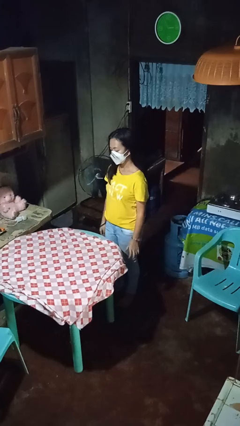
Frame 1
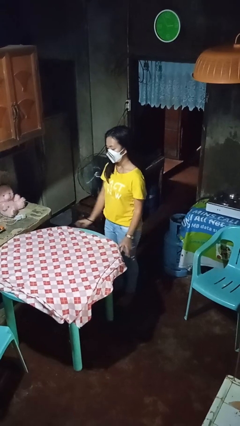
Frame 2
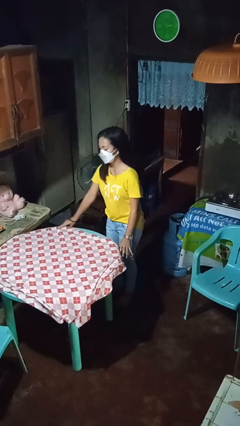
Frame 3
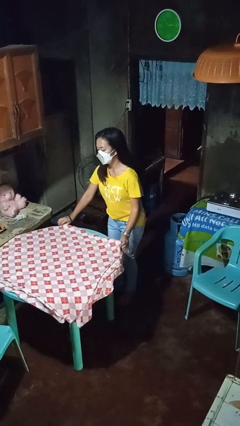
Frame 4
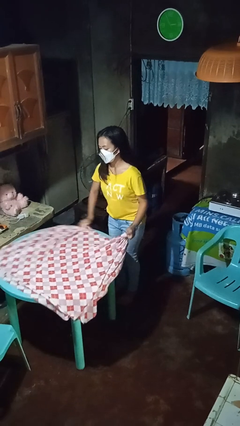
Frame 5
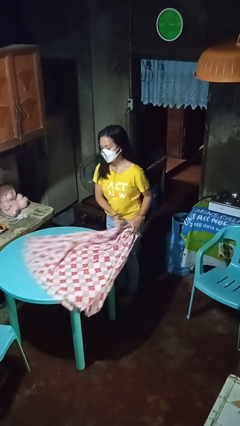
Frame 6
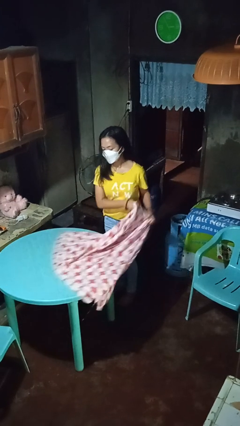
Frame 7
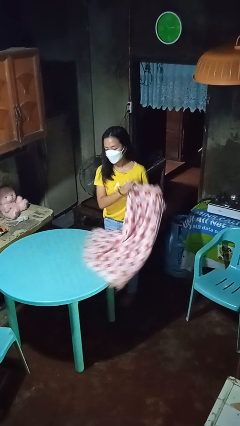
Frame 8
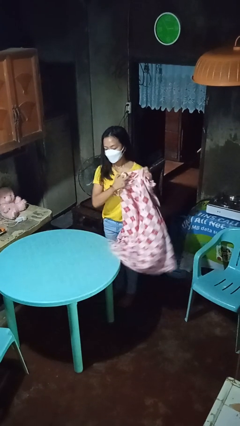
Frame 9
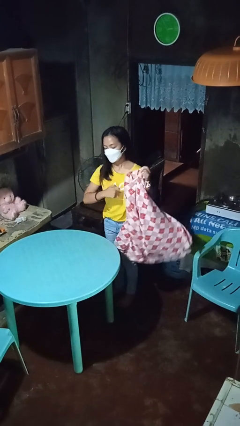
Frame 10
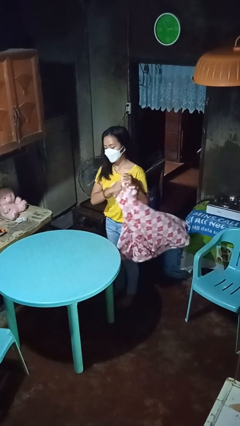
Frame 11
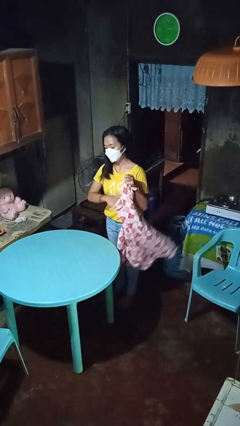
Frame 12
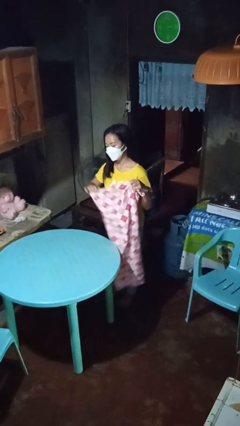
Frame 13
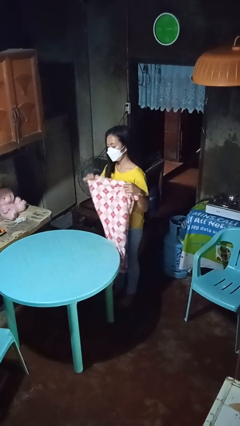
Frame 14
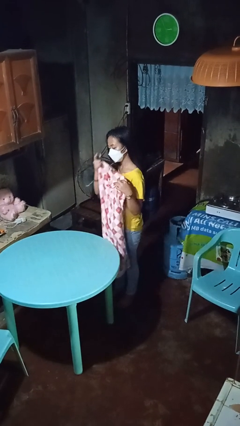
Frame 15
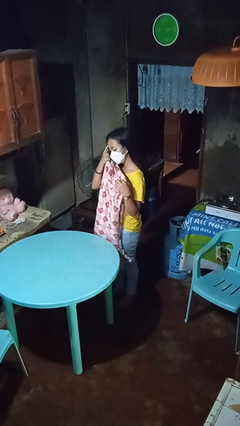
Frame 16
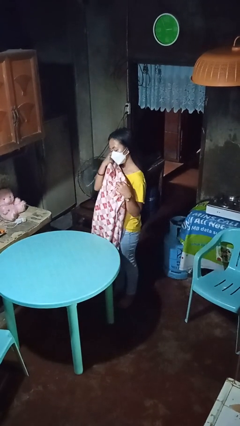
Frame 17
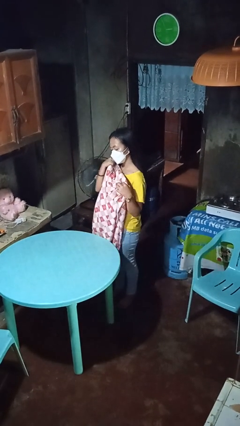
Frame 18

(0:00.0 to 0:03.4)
person folds tablecloth

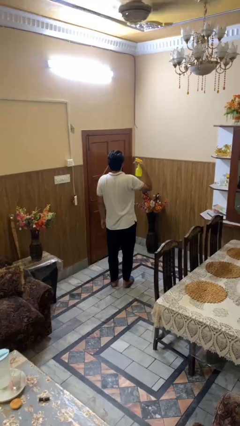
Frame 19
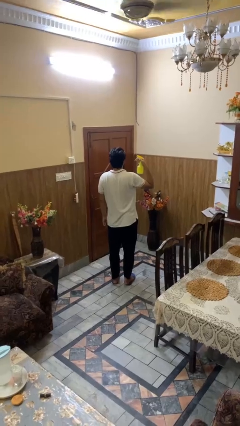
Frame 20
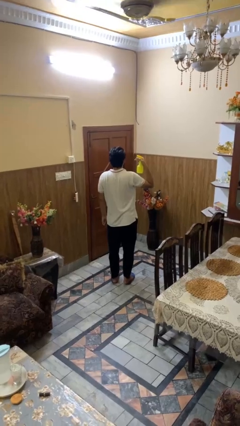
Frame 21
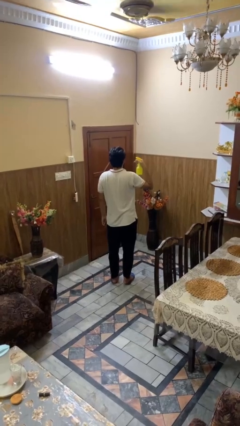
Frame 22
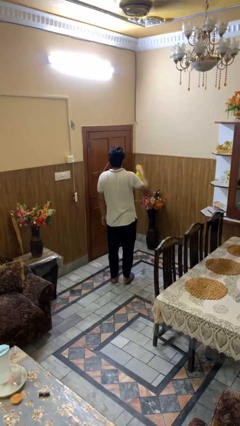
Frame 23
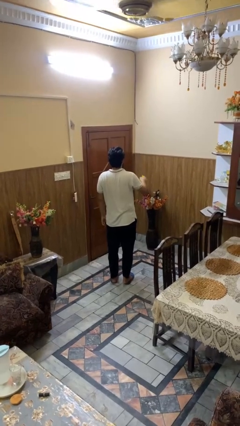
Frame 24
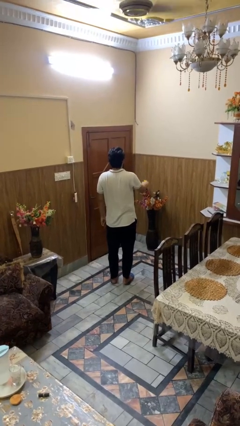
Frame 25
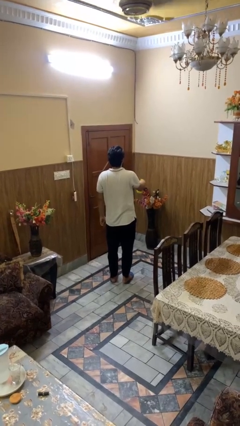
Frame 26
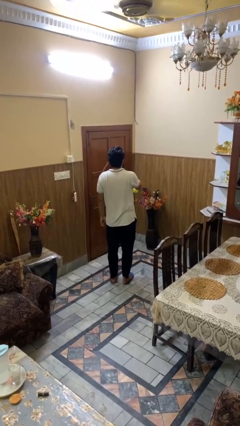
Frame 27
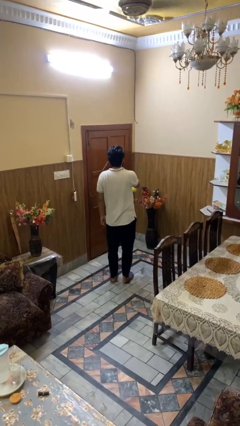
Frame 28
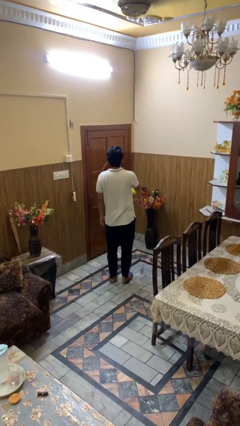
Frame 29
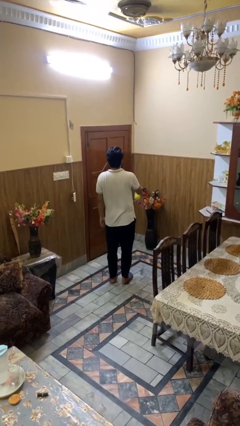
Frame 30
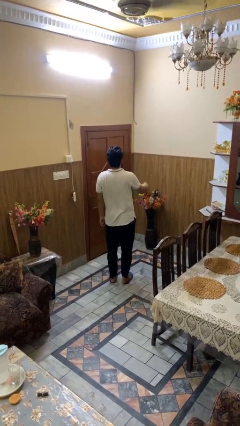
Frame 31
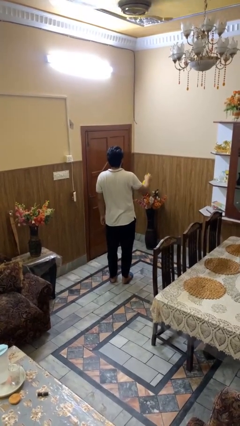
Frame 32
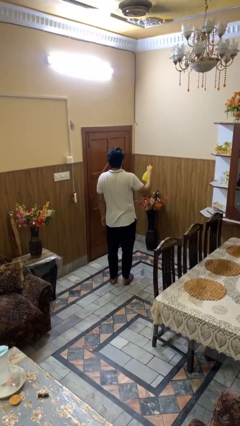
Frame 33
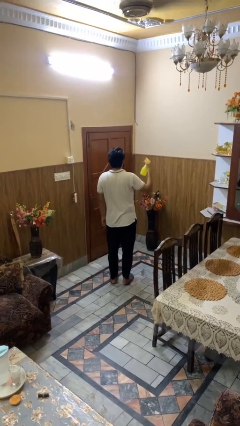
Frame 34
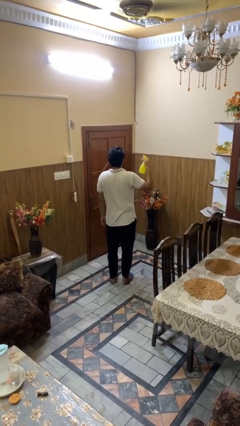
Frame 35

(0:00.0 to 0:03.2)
person sprays from bottle

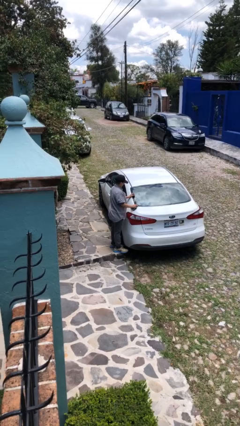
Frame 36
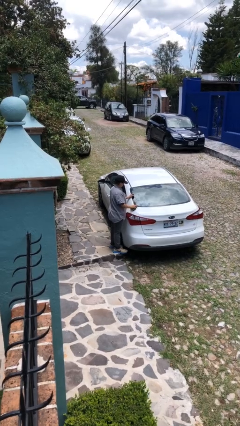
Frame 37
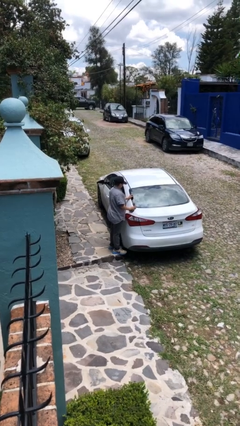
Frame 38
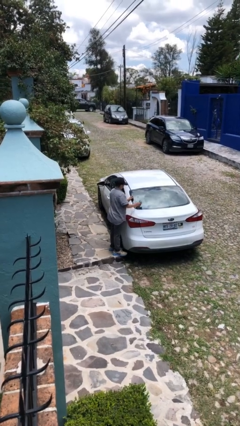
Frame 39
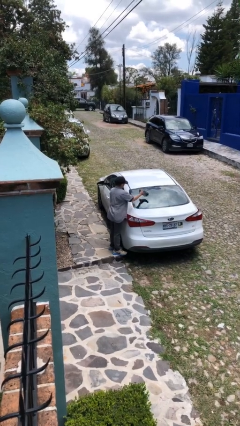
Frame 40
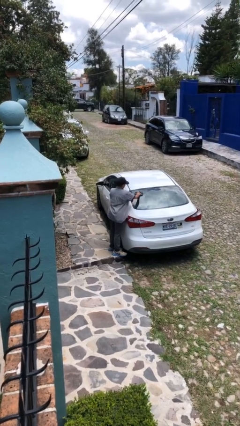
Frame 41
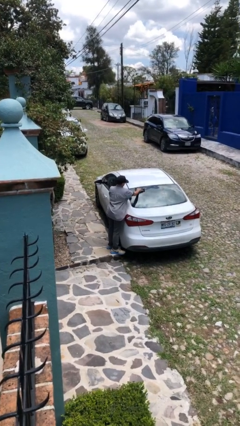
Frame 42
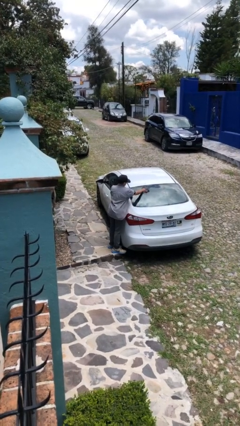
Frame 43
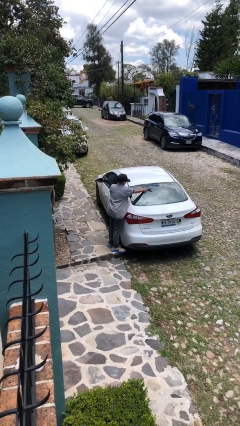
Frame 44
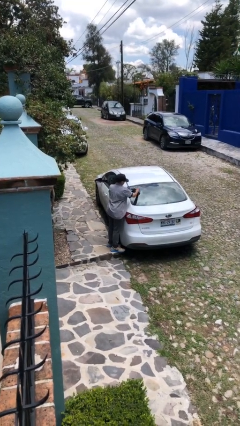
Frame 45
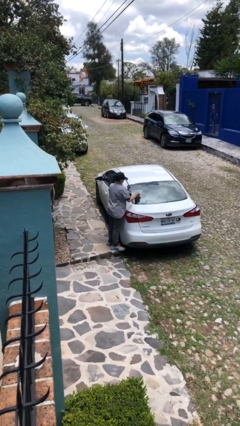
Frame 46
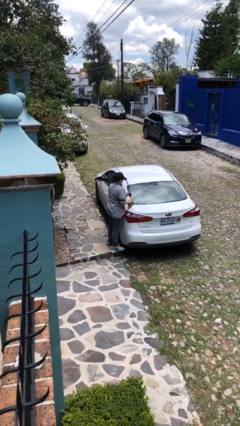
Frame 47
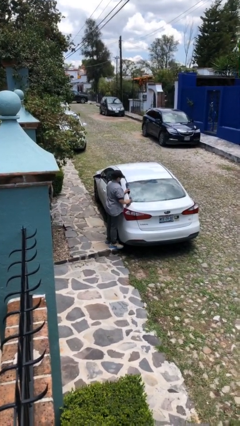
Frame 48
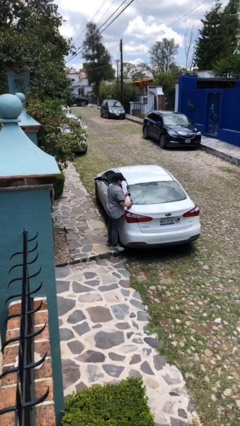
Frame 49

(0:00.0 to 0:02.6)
person polishes car with rag

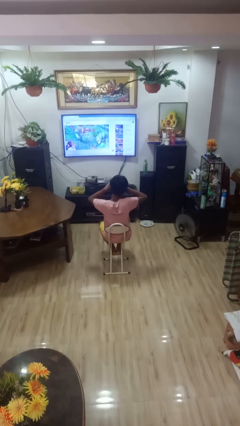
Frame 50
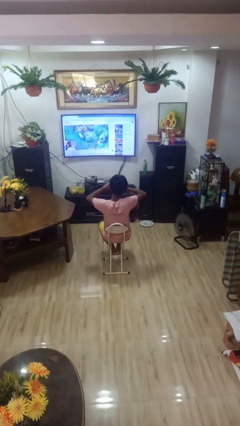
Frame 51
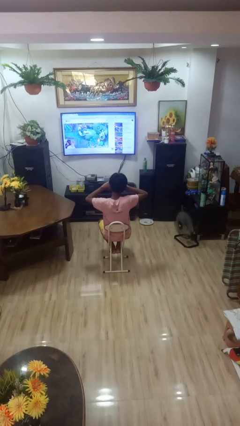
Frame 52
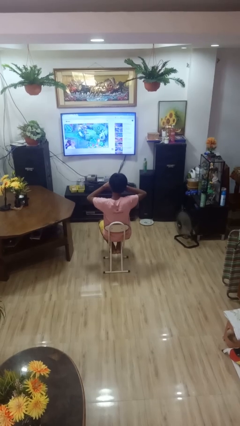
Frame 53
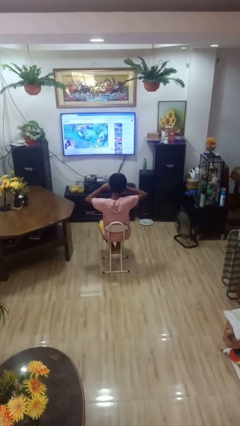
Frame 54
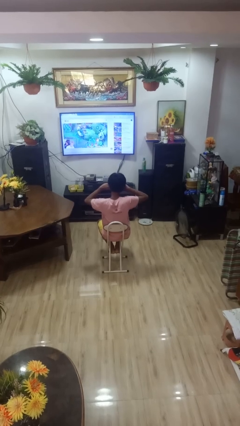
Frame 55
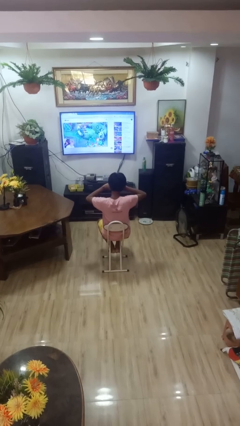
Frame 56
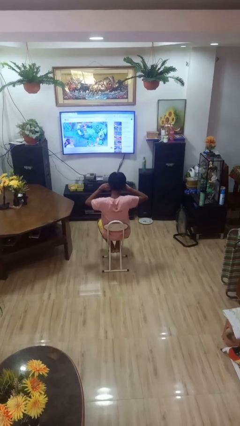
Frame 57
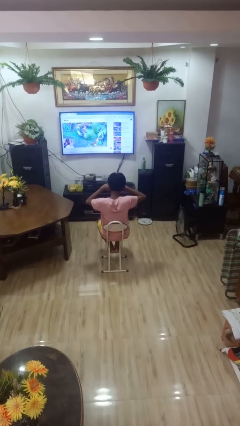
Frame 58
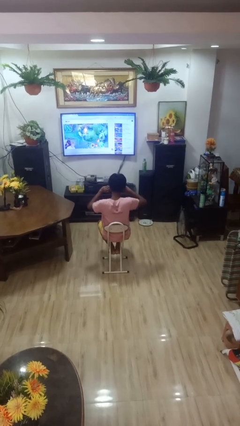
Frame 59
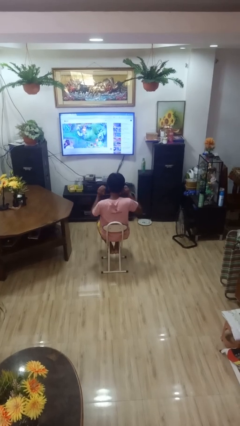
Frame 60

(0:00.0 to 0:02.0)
person rubs eyes

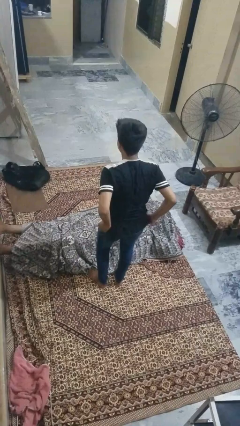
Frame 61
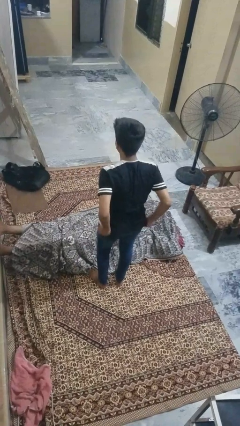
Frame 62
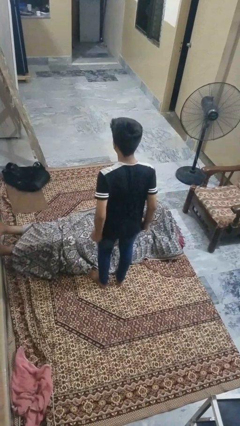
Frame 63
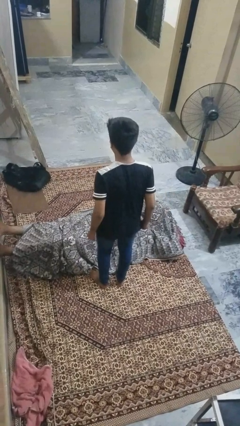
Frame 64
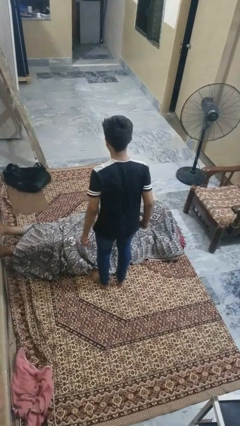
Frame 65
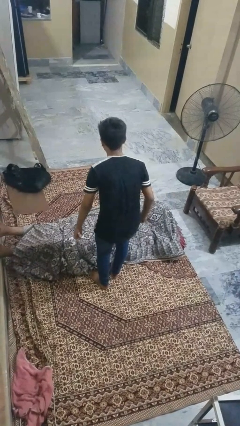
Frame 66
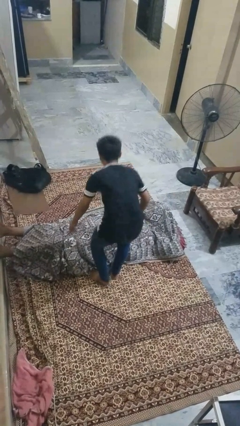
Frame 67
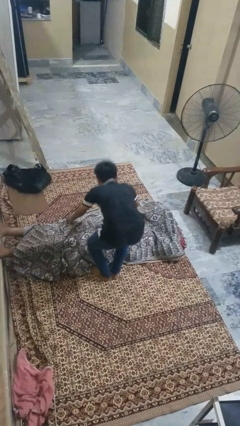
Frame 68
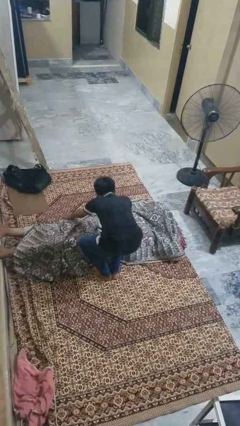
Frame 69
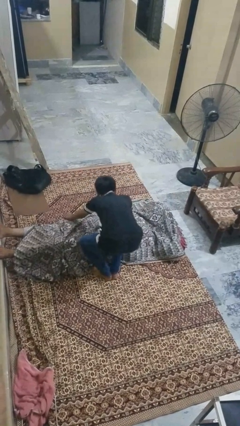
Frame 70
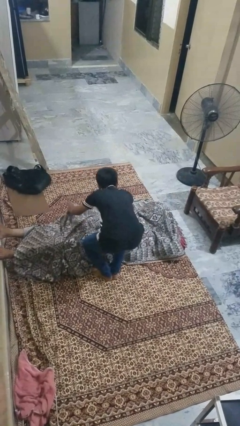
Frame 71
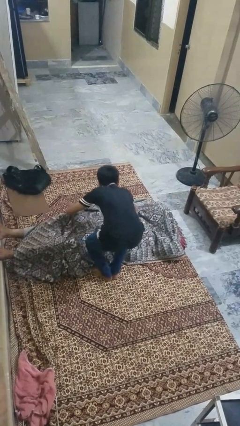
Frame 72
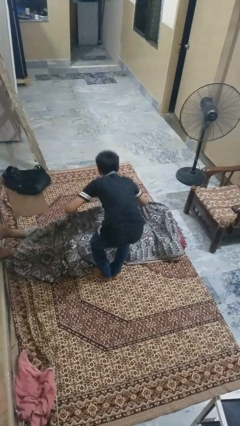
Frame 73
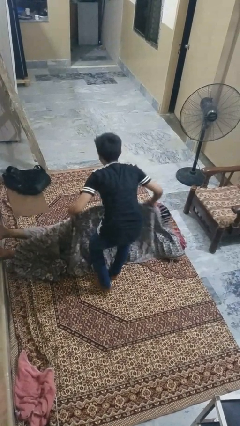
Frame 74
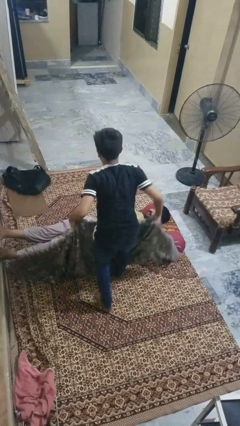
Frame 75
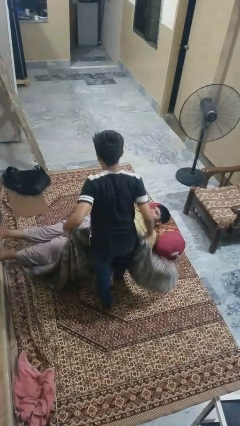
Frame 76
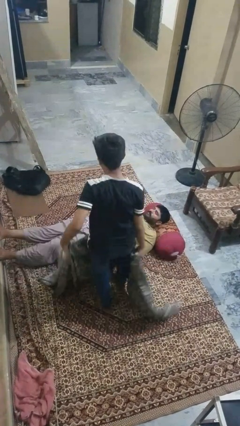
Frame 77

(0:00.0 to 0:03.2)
person uncovers friend with blanket

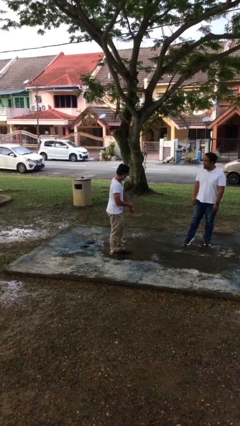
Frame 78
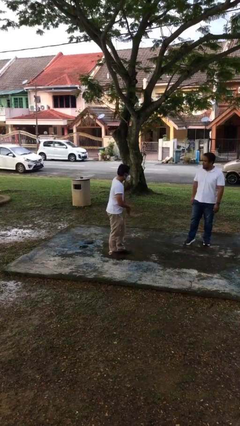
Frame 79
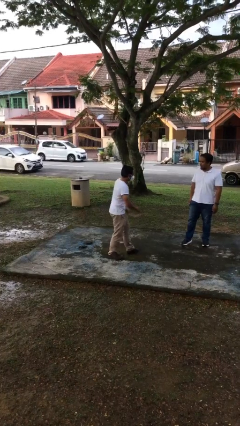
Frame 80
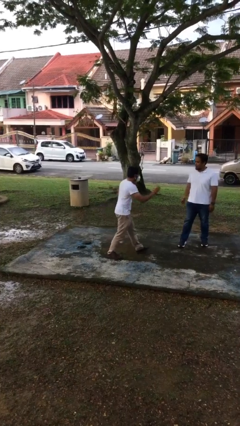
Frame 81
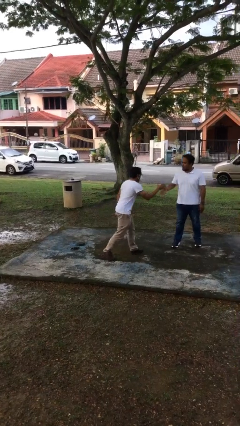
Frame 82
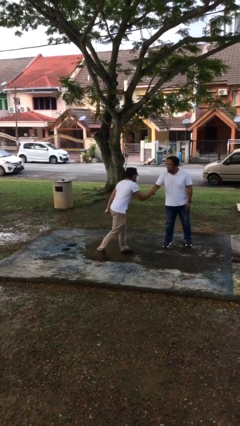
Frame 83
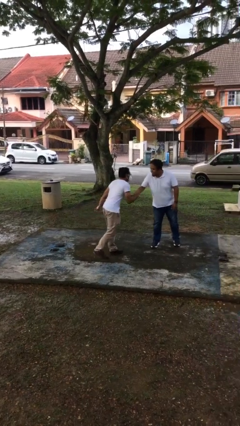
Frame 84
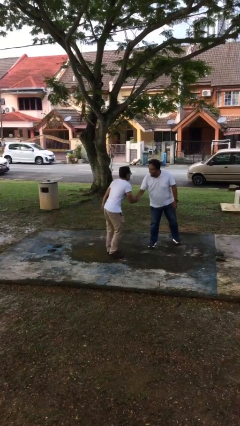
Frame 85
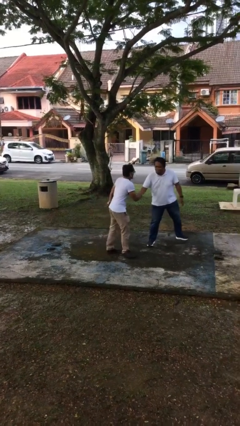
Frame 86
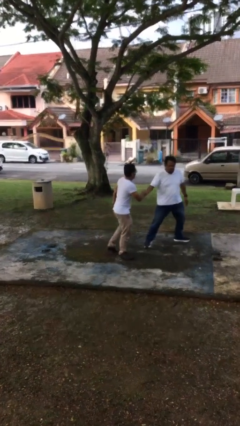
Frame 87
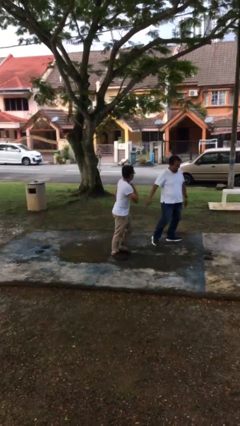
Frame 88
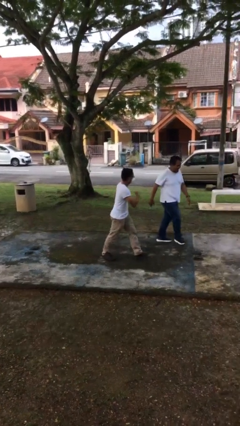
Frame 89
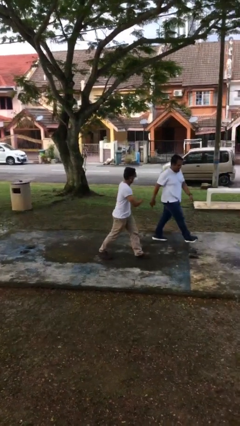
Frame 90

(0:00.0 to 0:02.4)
person shakes hand

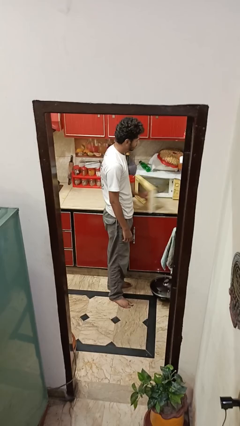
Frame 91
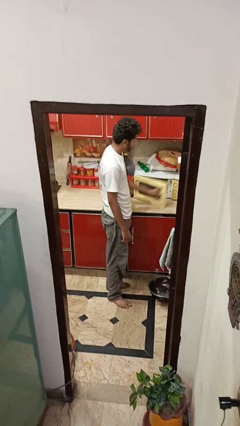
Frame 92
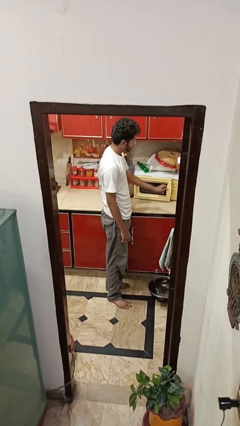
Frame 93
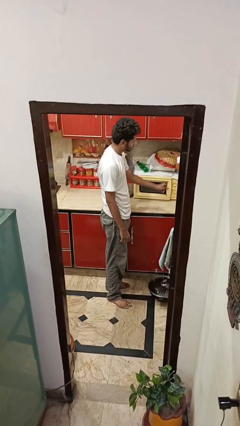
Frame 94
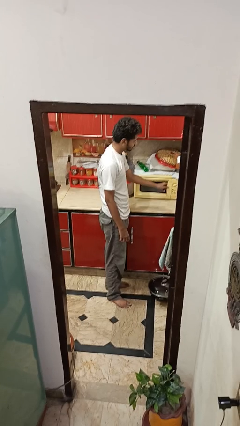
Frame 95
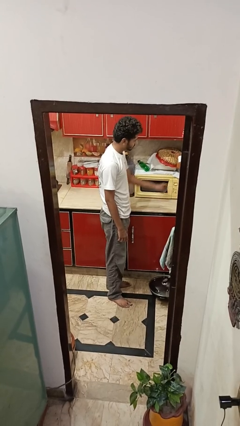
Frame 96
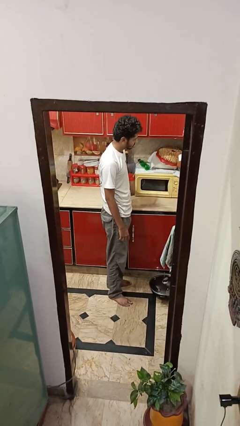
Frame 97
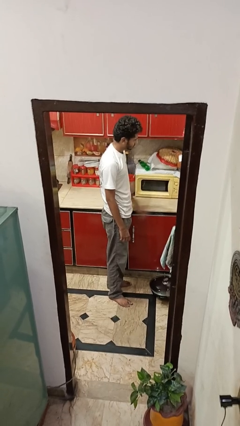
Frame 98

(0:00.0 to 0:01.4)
person closes oven door
